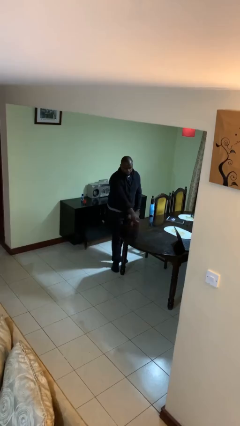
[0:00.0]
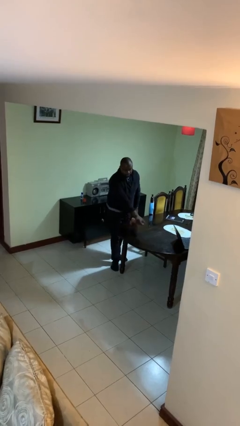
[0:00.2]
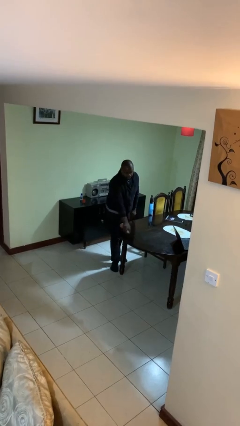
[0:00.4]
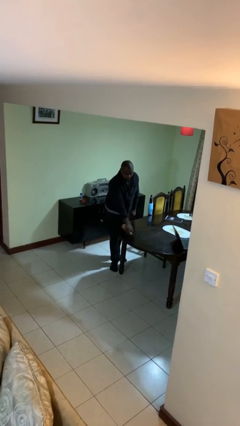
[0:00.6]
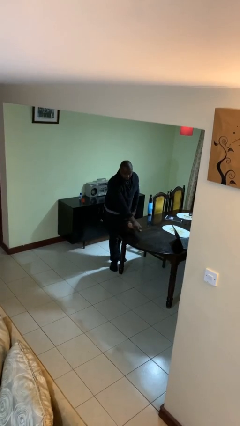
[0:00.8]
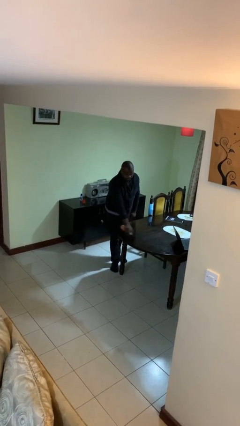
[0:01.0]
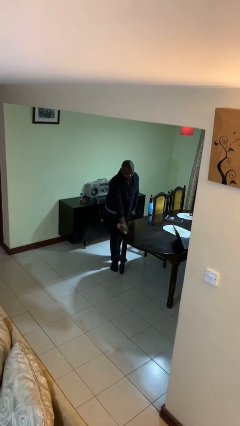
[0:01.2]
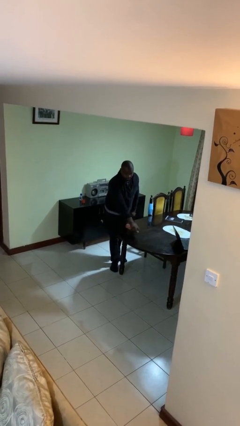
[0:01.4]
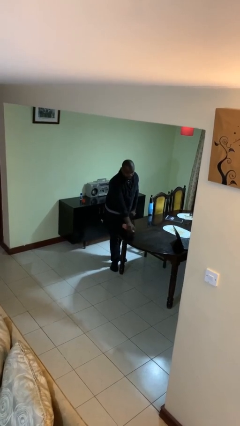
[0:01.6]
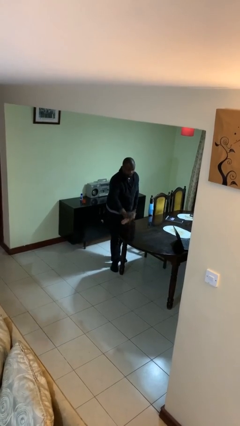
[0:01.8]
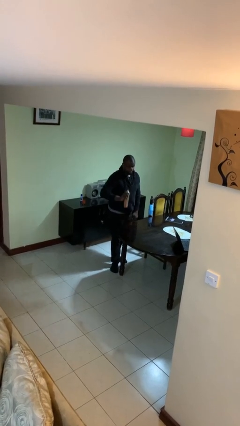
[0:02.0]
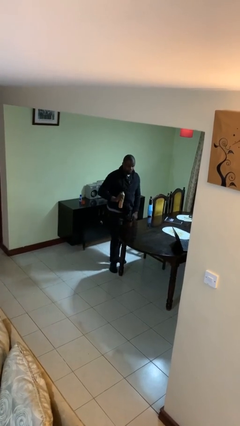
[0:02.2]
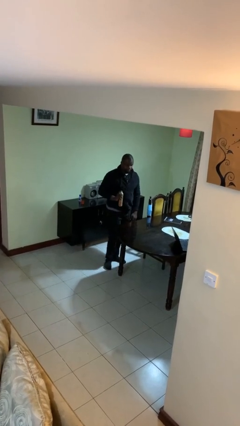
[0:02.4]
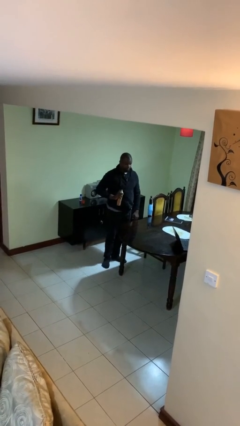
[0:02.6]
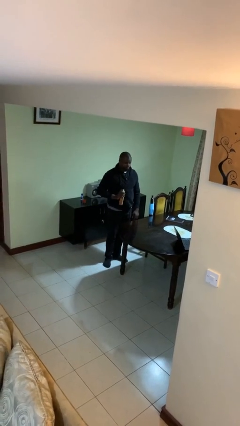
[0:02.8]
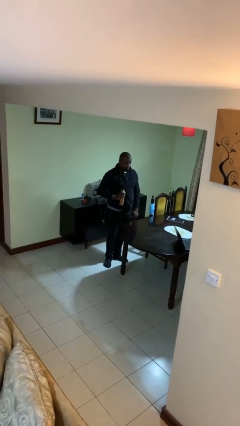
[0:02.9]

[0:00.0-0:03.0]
person sprays from bottle

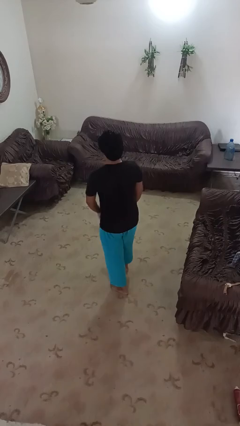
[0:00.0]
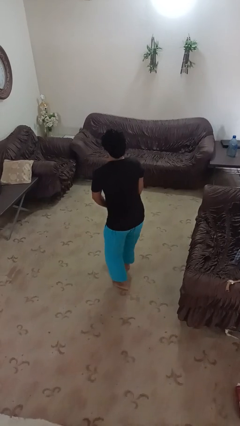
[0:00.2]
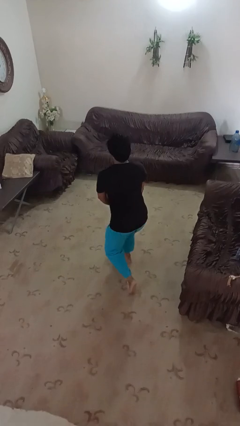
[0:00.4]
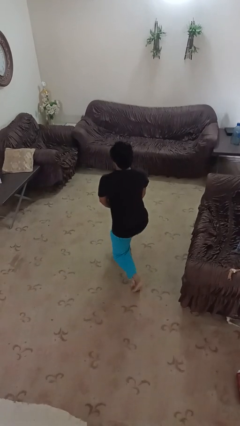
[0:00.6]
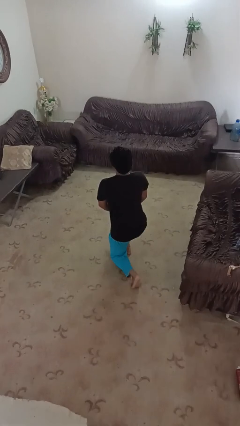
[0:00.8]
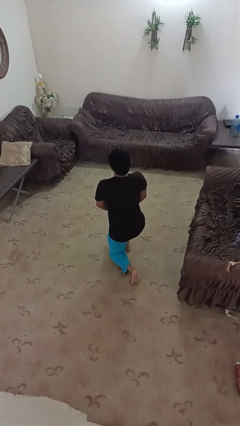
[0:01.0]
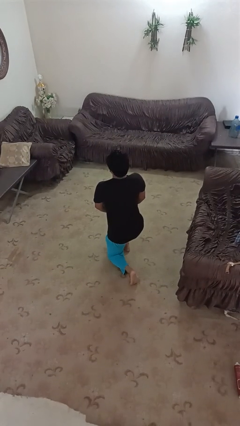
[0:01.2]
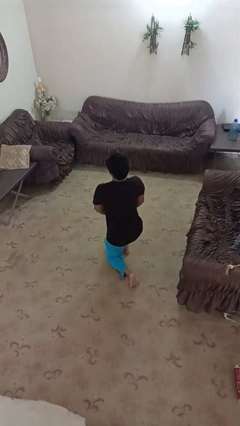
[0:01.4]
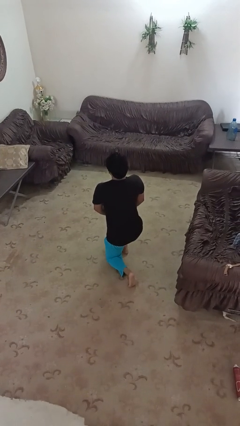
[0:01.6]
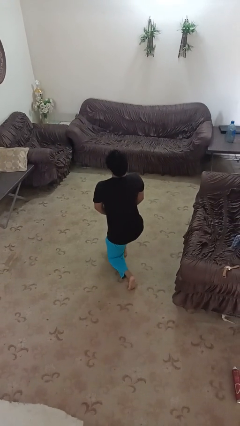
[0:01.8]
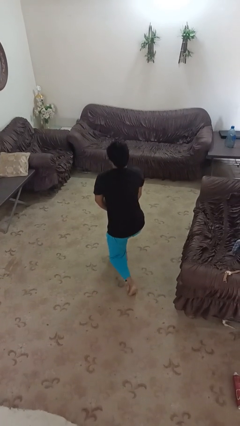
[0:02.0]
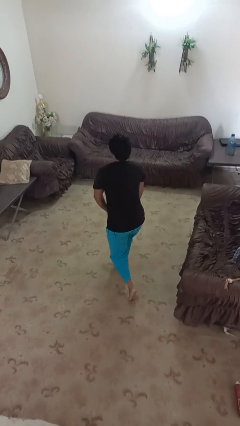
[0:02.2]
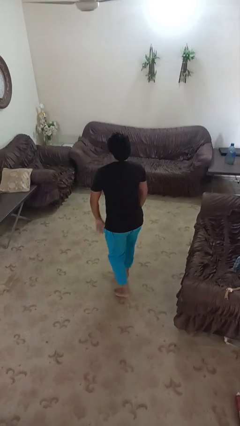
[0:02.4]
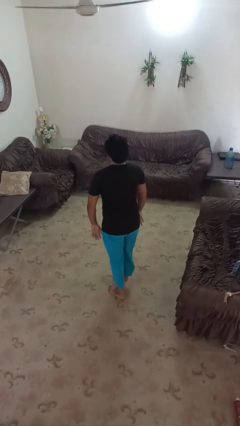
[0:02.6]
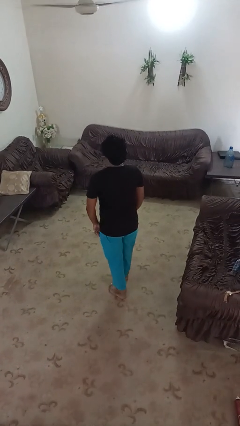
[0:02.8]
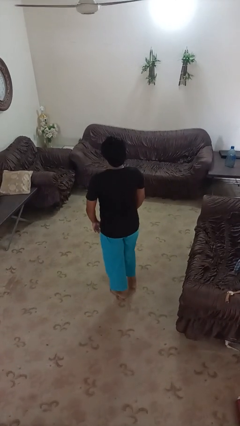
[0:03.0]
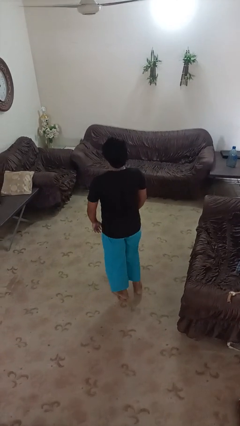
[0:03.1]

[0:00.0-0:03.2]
person exercises with lunges

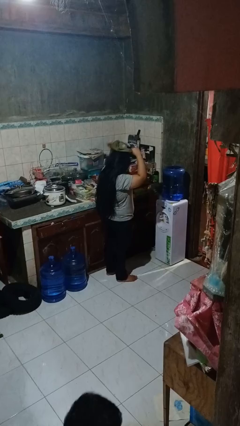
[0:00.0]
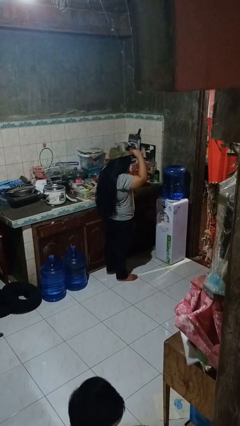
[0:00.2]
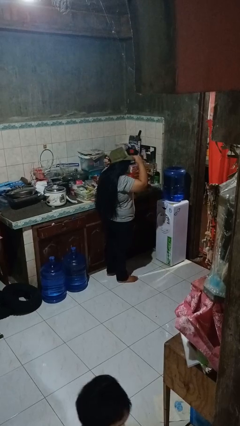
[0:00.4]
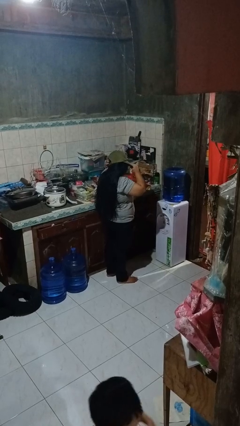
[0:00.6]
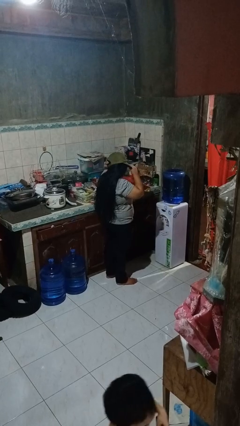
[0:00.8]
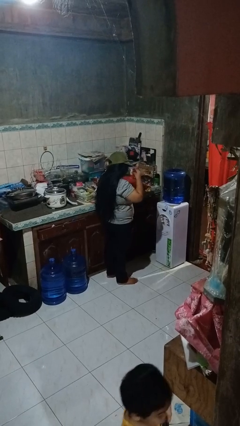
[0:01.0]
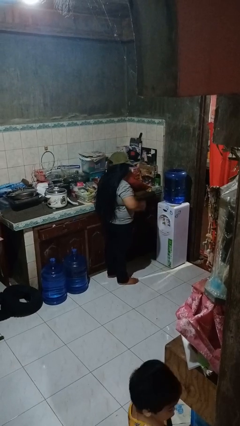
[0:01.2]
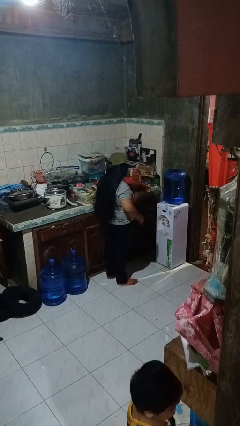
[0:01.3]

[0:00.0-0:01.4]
person puts on hat

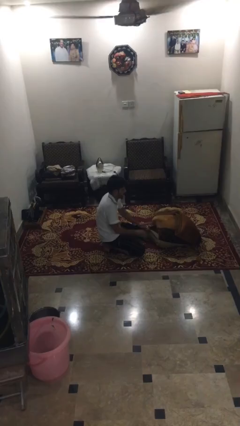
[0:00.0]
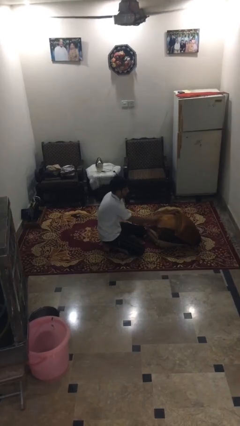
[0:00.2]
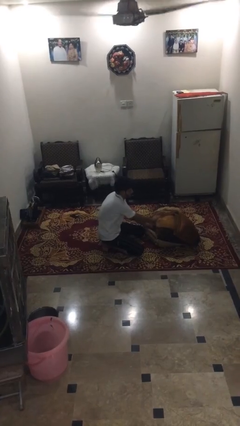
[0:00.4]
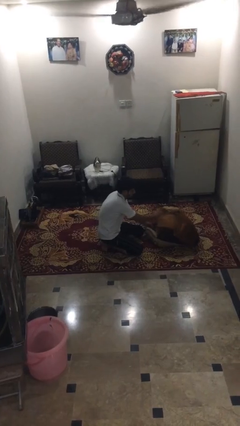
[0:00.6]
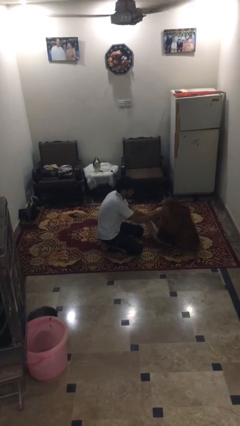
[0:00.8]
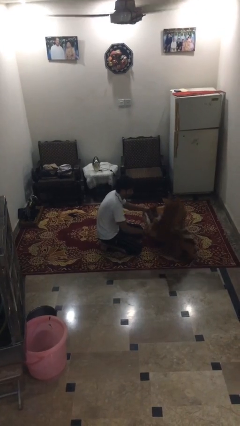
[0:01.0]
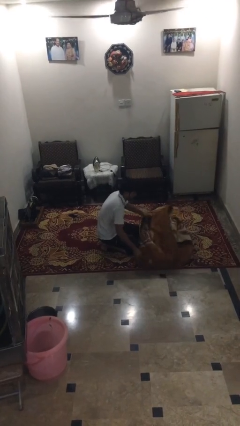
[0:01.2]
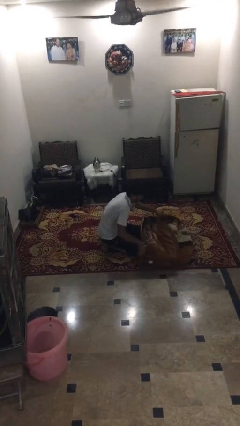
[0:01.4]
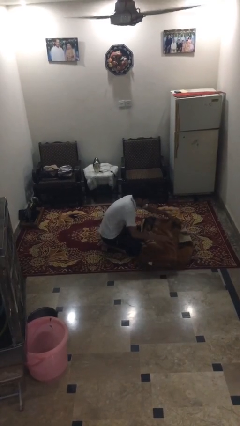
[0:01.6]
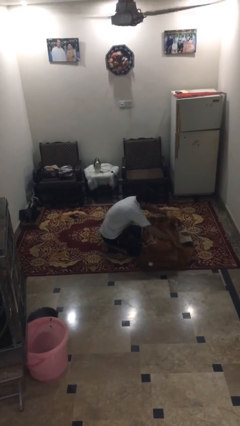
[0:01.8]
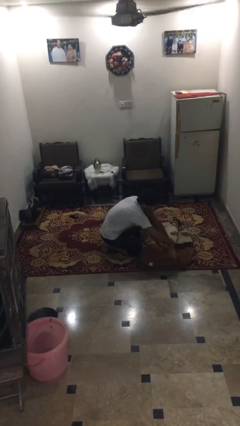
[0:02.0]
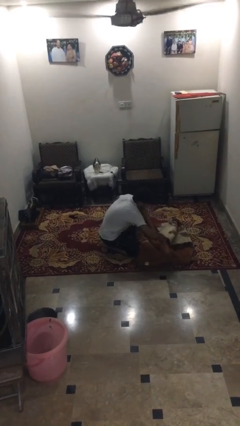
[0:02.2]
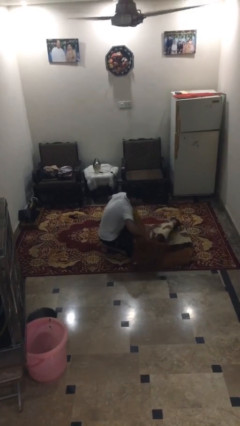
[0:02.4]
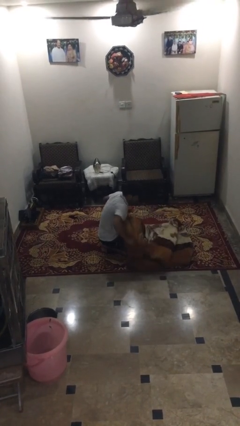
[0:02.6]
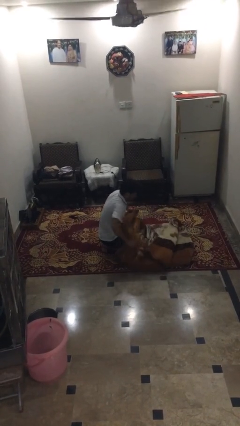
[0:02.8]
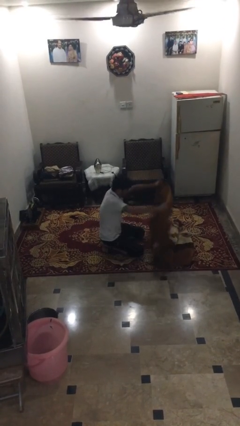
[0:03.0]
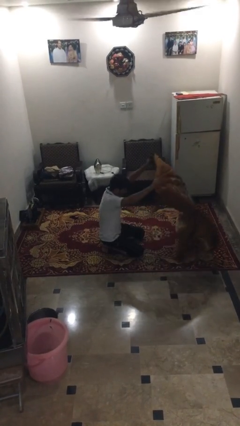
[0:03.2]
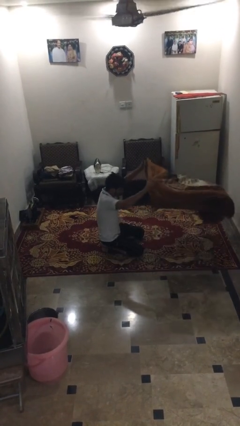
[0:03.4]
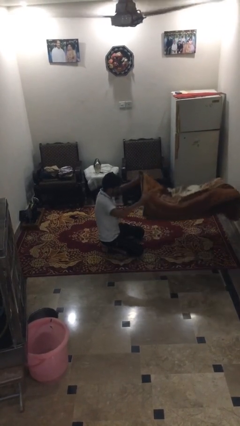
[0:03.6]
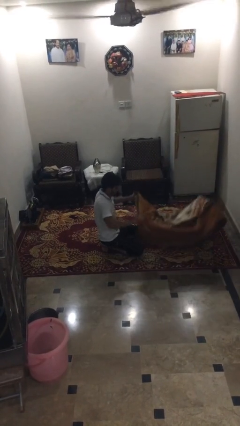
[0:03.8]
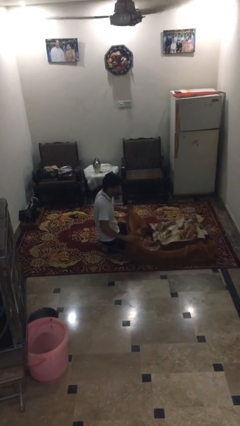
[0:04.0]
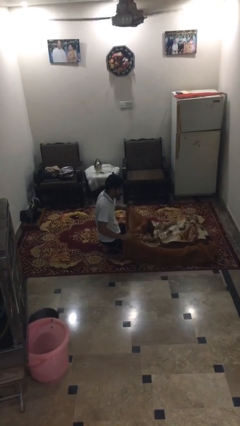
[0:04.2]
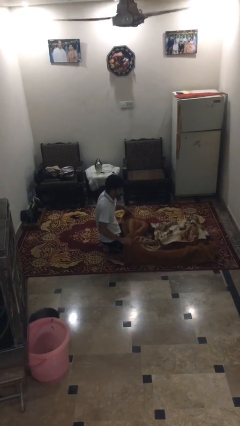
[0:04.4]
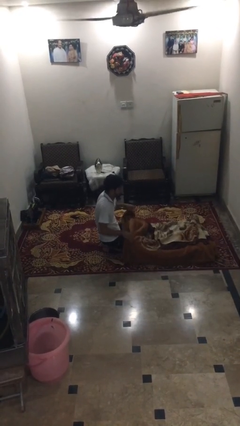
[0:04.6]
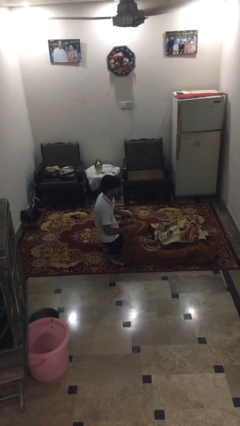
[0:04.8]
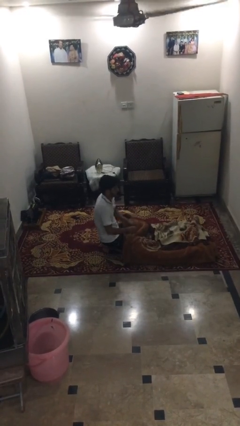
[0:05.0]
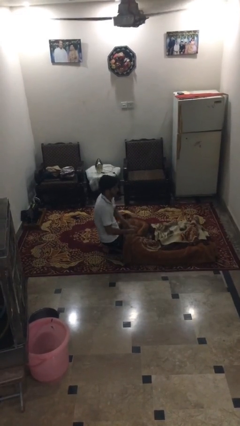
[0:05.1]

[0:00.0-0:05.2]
person unfolds blanket

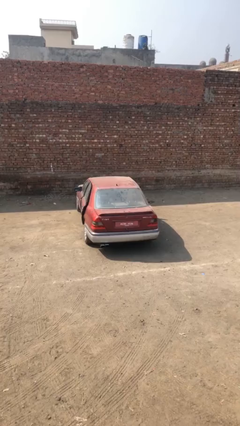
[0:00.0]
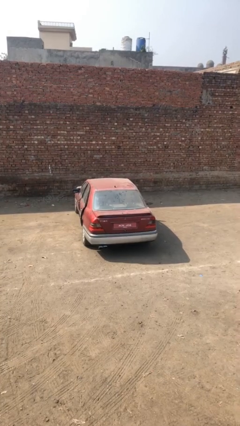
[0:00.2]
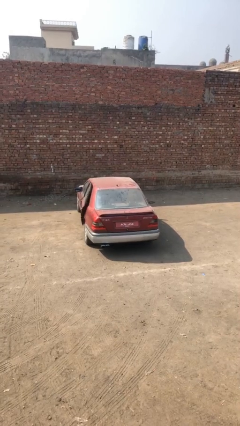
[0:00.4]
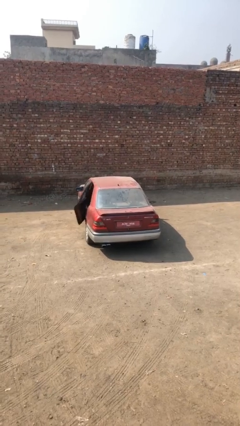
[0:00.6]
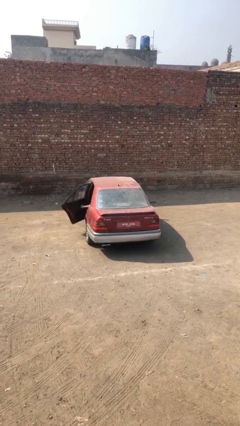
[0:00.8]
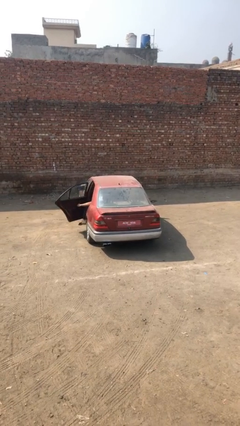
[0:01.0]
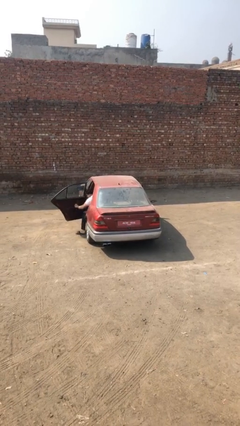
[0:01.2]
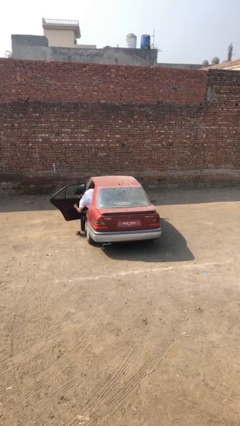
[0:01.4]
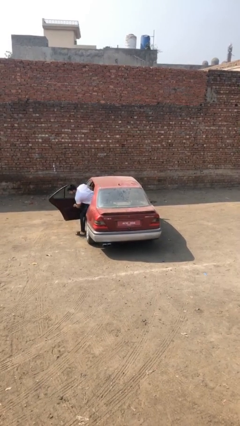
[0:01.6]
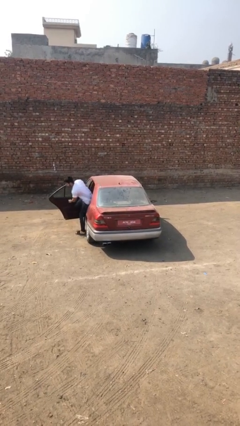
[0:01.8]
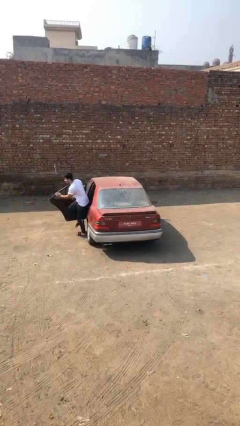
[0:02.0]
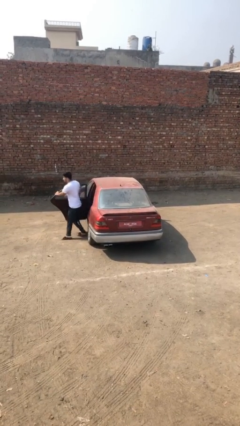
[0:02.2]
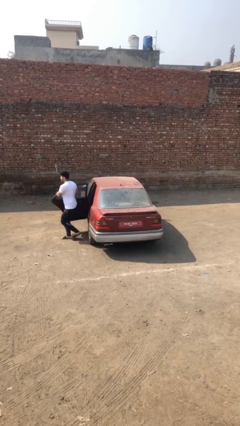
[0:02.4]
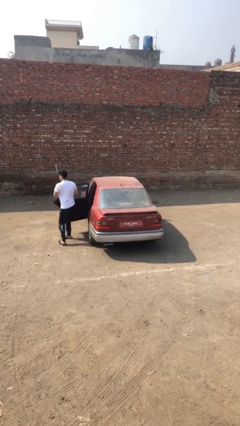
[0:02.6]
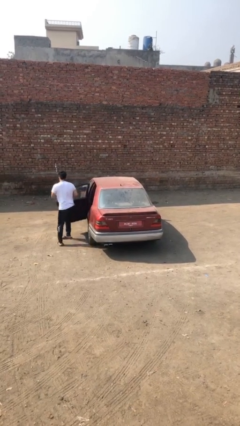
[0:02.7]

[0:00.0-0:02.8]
car drops off person

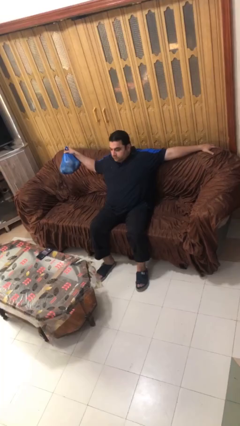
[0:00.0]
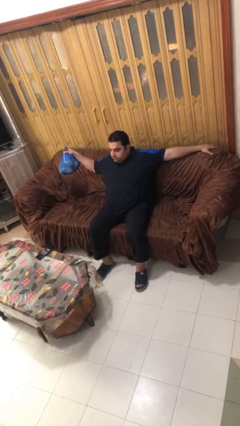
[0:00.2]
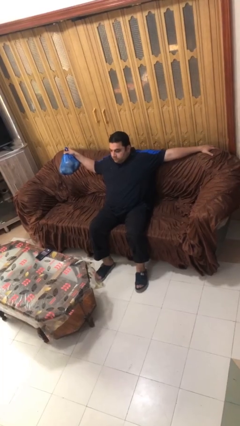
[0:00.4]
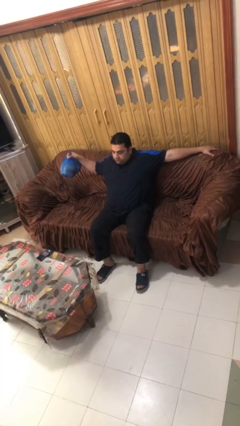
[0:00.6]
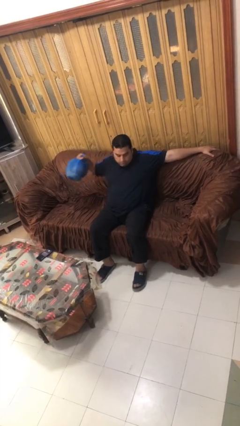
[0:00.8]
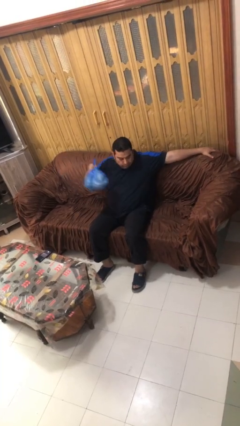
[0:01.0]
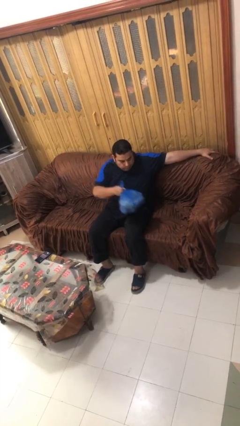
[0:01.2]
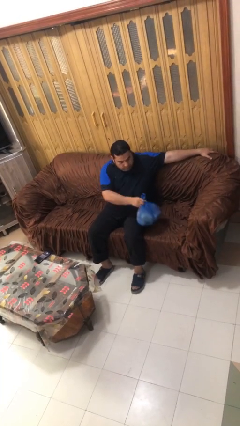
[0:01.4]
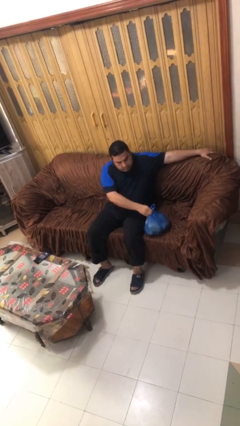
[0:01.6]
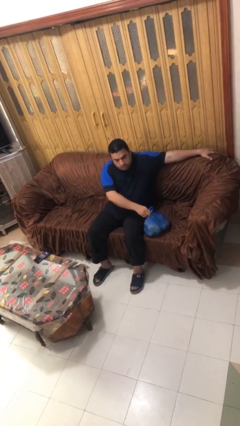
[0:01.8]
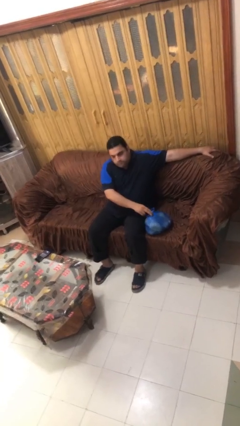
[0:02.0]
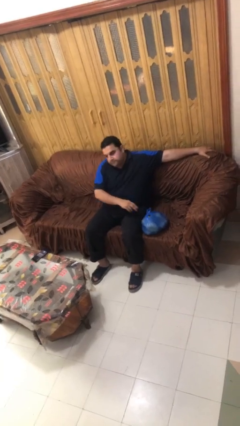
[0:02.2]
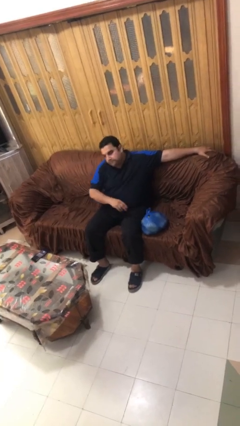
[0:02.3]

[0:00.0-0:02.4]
person puts down object on couch
